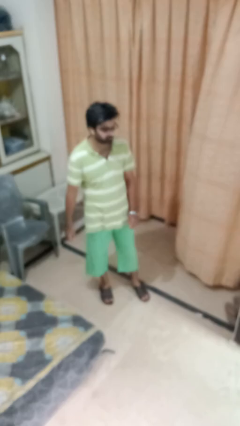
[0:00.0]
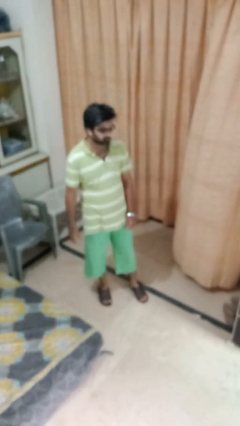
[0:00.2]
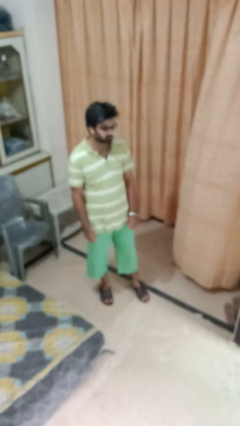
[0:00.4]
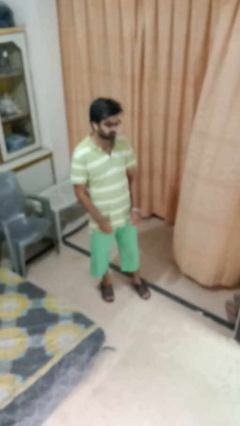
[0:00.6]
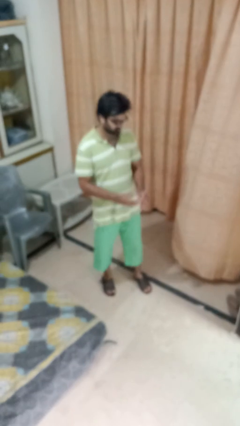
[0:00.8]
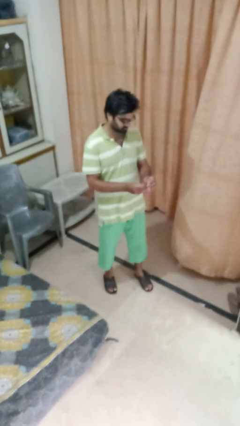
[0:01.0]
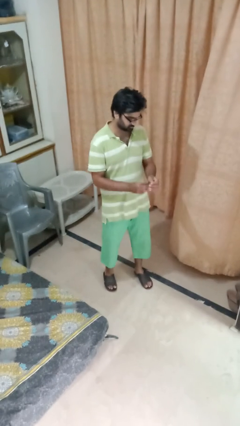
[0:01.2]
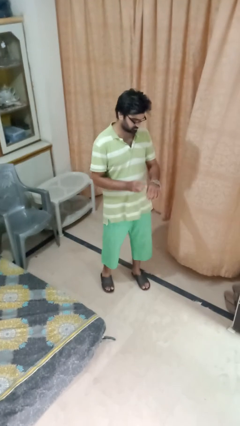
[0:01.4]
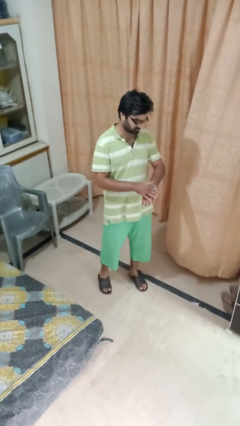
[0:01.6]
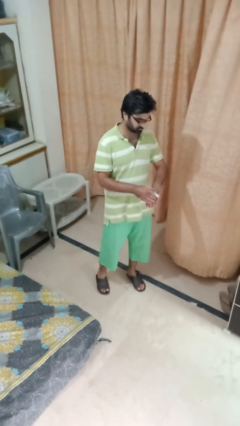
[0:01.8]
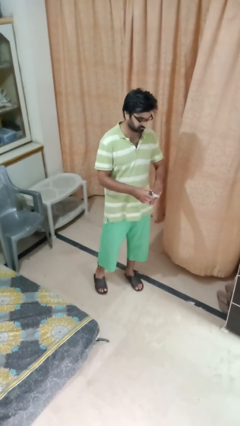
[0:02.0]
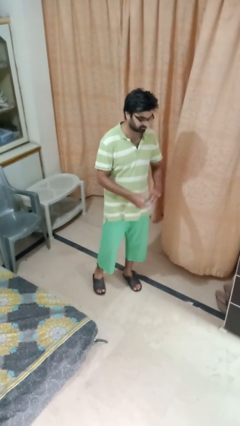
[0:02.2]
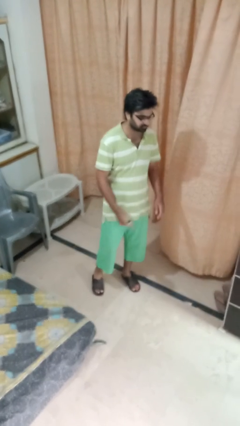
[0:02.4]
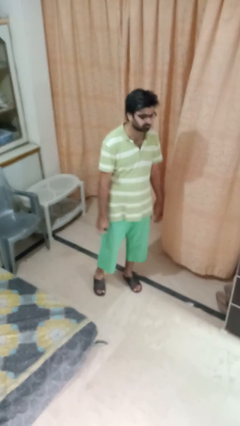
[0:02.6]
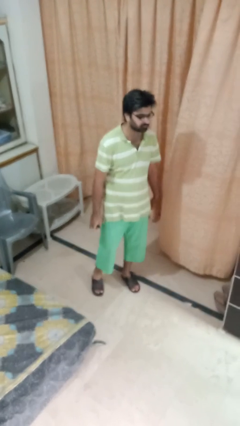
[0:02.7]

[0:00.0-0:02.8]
person takes off wristwatch

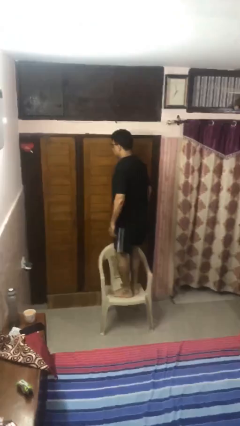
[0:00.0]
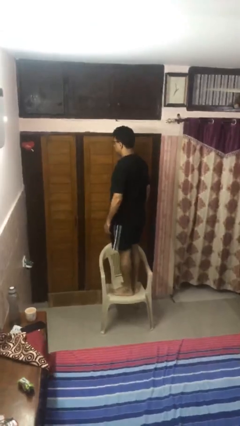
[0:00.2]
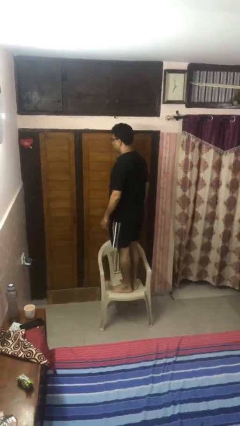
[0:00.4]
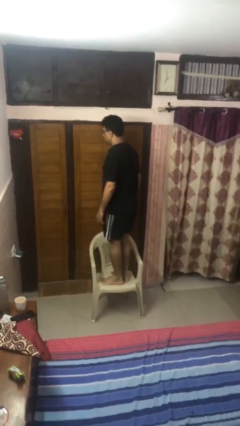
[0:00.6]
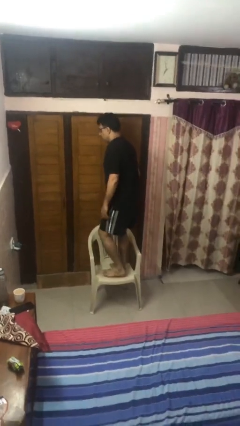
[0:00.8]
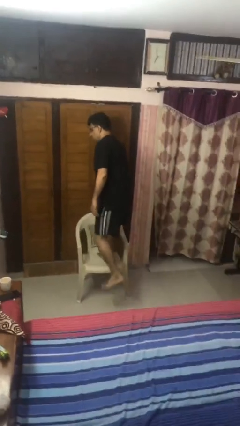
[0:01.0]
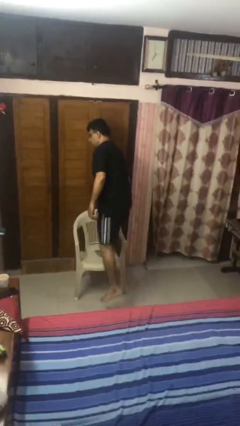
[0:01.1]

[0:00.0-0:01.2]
person climbs off chair

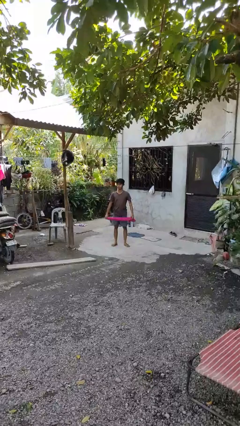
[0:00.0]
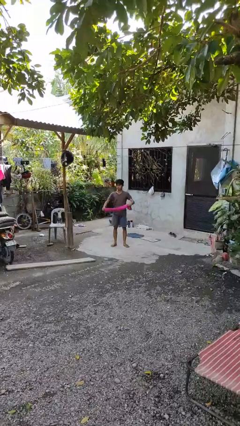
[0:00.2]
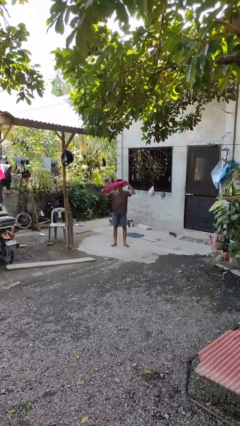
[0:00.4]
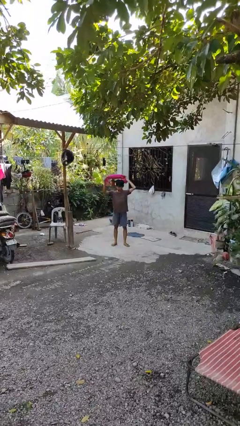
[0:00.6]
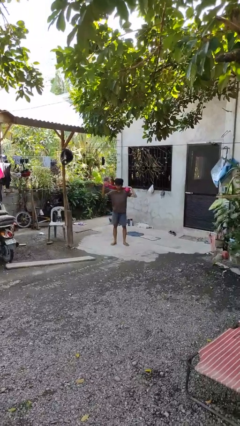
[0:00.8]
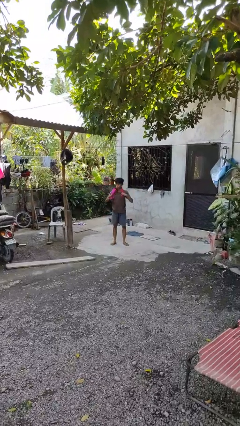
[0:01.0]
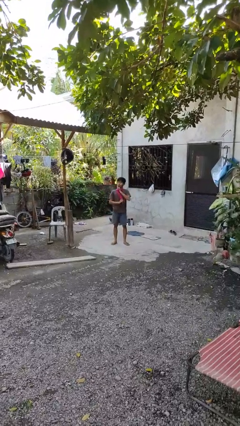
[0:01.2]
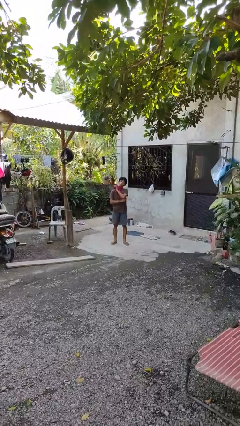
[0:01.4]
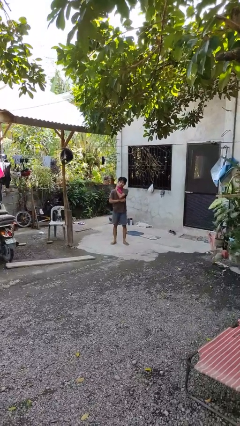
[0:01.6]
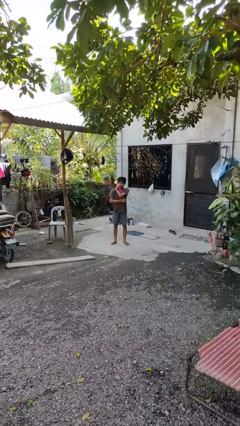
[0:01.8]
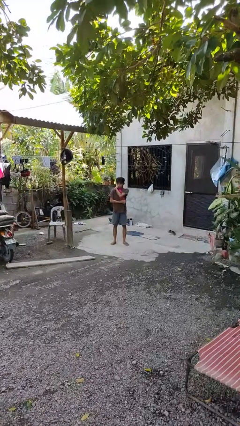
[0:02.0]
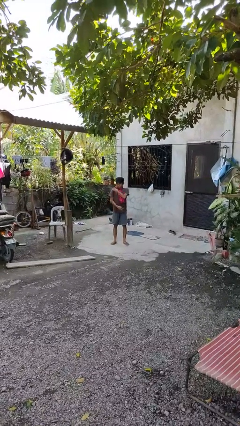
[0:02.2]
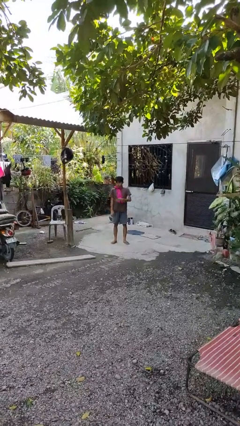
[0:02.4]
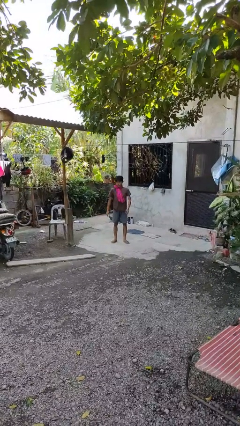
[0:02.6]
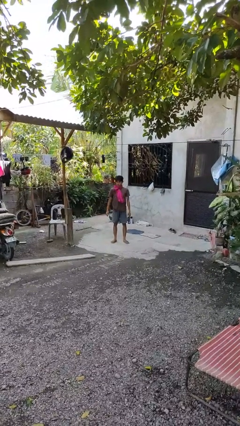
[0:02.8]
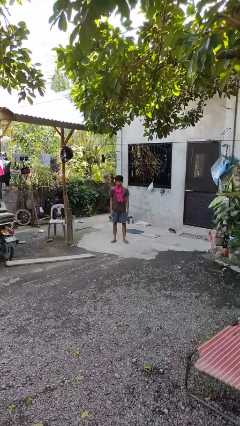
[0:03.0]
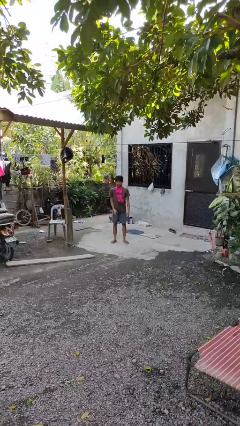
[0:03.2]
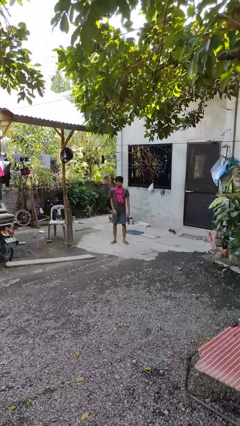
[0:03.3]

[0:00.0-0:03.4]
person puts on scarf

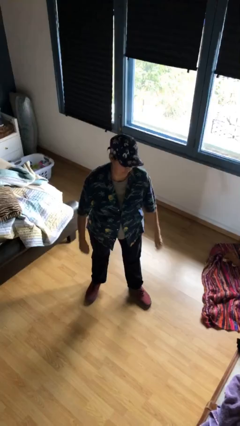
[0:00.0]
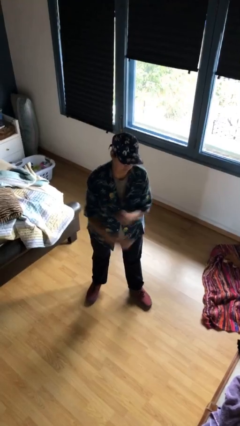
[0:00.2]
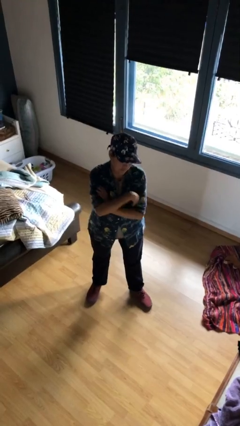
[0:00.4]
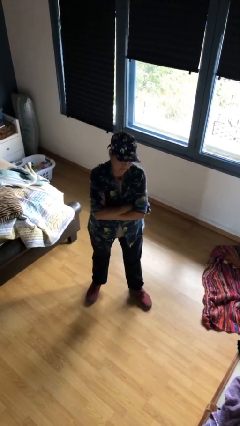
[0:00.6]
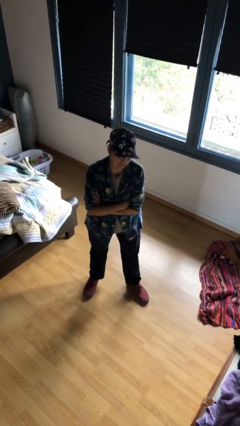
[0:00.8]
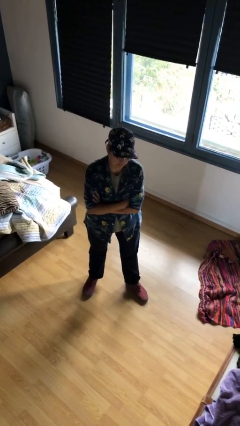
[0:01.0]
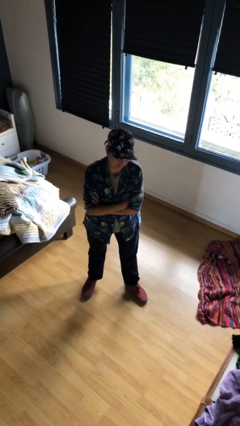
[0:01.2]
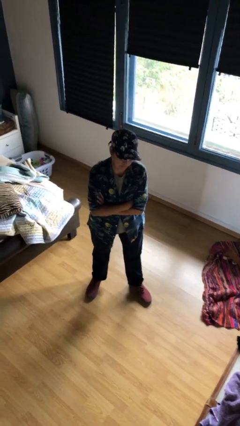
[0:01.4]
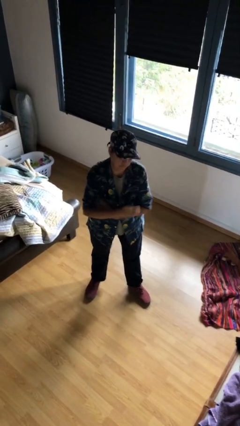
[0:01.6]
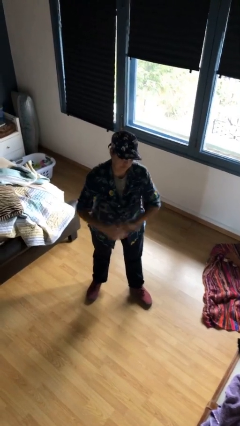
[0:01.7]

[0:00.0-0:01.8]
person crosses arms

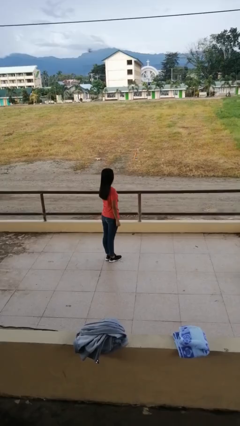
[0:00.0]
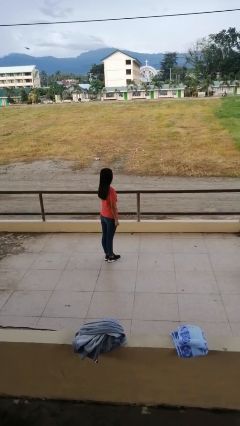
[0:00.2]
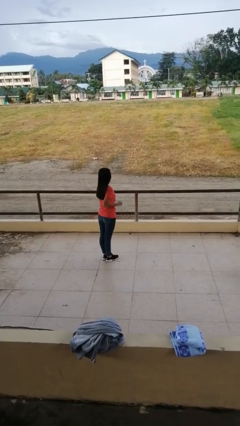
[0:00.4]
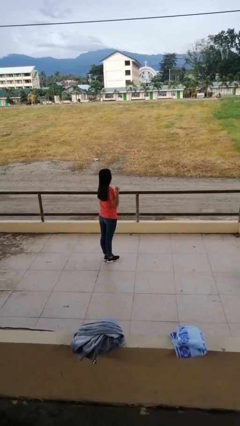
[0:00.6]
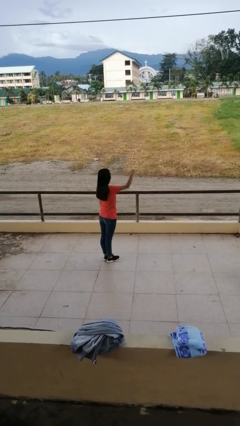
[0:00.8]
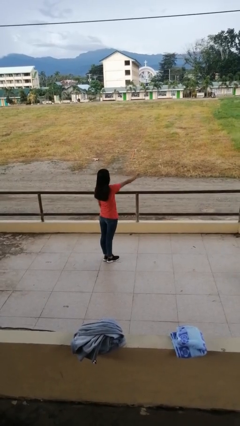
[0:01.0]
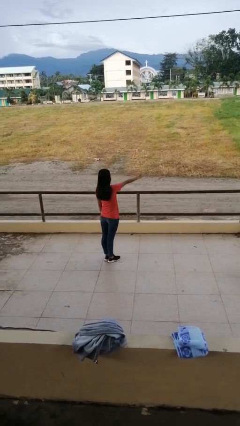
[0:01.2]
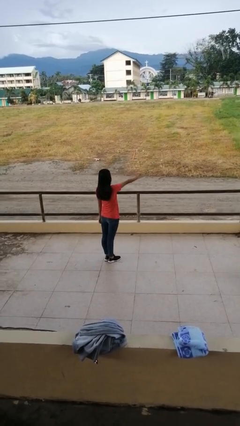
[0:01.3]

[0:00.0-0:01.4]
person punches

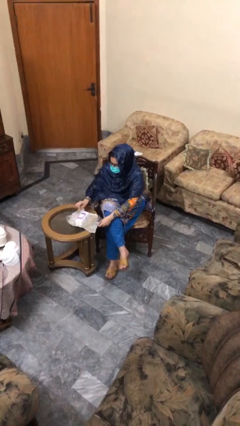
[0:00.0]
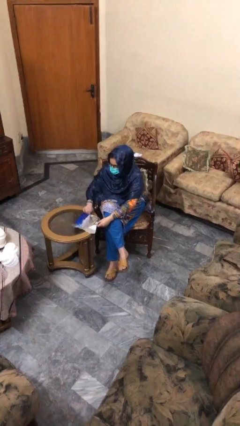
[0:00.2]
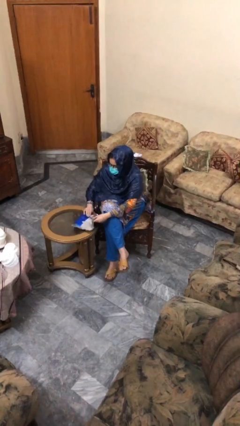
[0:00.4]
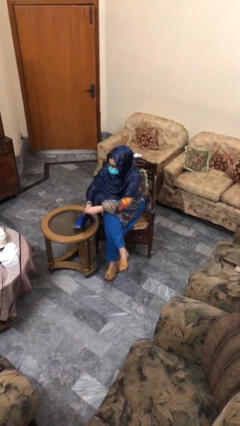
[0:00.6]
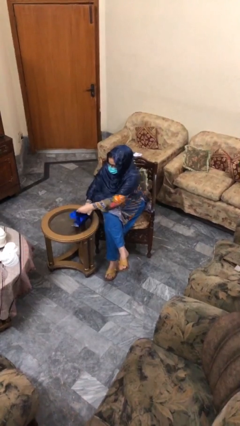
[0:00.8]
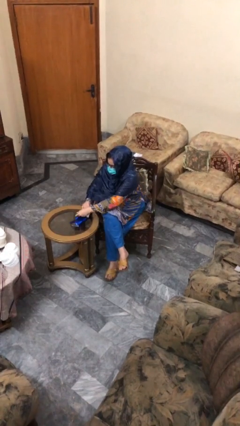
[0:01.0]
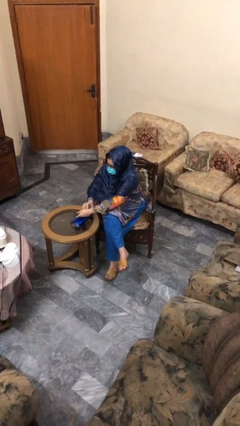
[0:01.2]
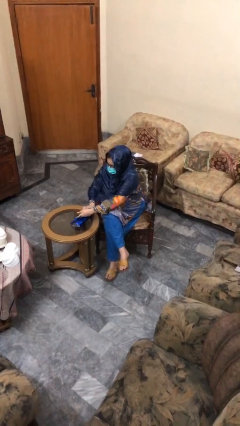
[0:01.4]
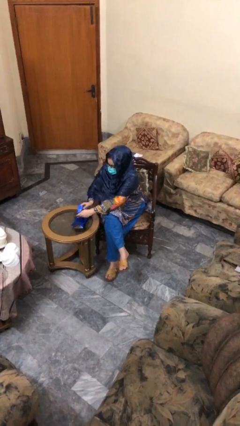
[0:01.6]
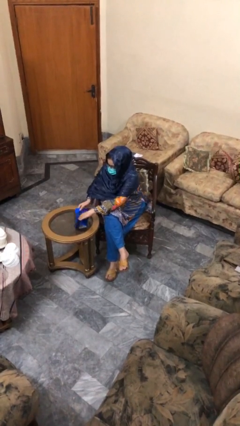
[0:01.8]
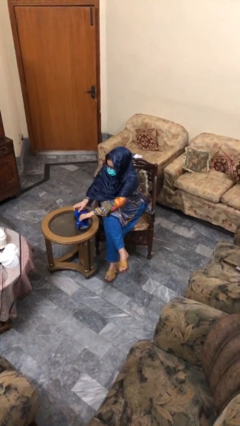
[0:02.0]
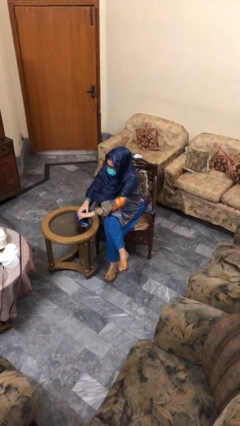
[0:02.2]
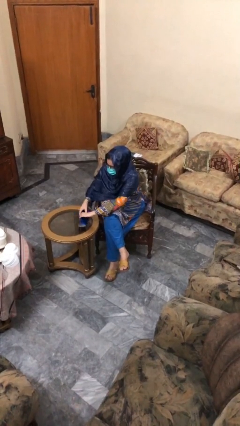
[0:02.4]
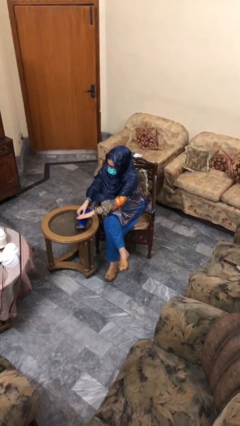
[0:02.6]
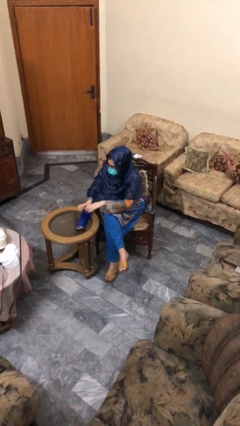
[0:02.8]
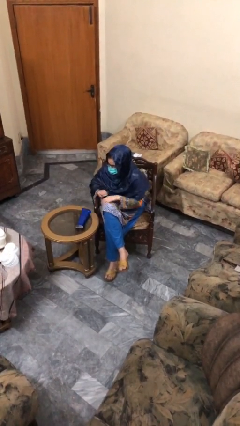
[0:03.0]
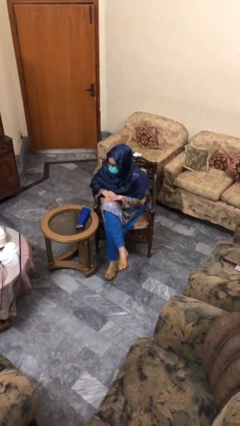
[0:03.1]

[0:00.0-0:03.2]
person wraps box

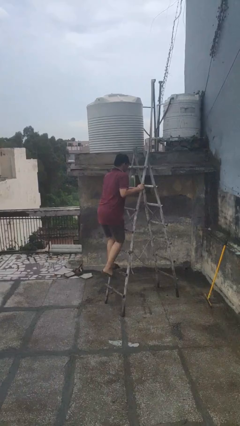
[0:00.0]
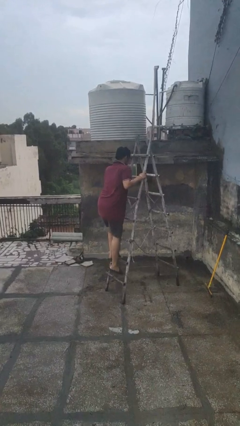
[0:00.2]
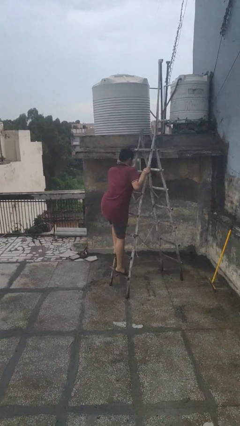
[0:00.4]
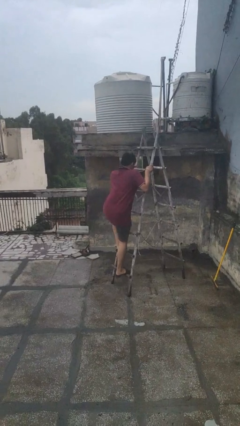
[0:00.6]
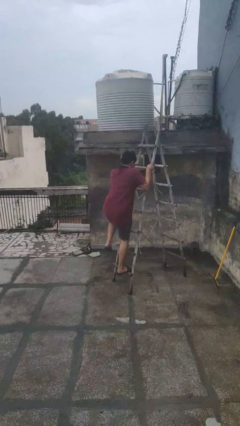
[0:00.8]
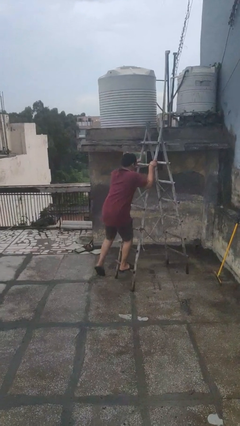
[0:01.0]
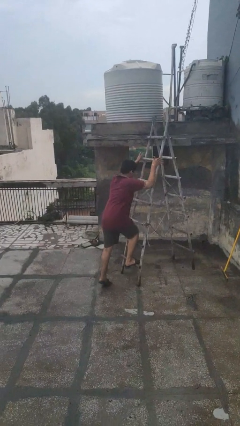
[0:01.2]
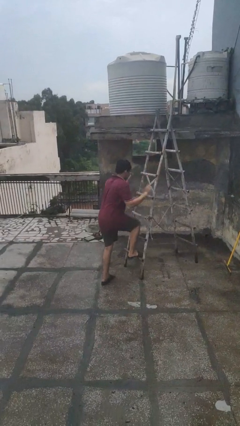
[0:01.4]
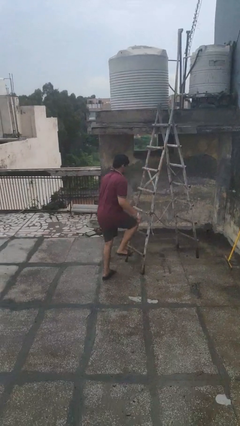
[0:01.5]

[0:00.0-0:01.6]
person climbs down ladder

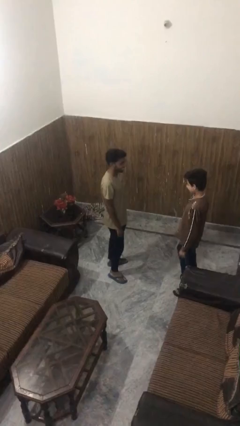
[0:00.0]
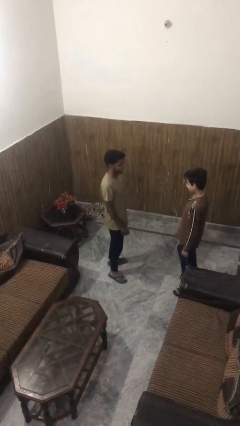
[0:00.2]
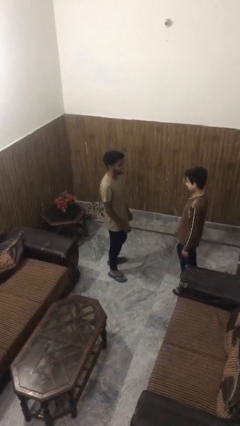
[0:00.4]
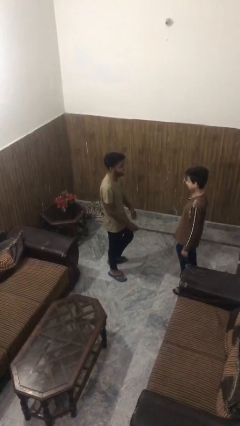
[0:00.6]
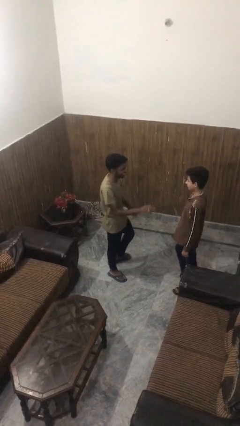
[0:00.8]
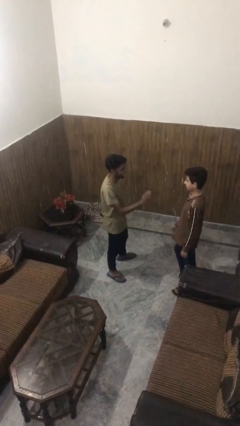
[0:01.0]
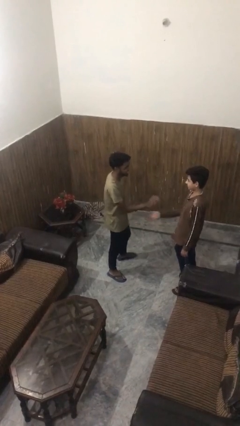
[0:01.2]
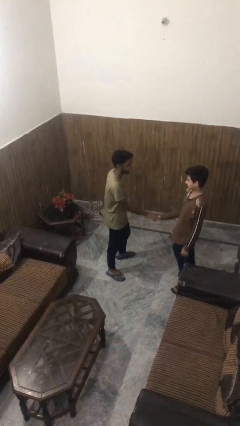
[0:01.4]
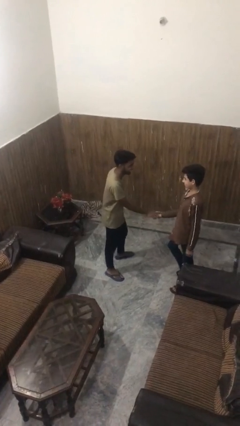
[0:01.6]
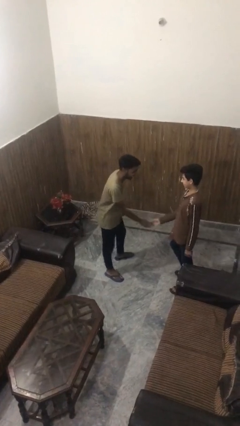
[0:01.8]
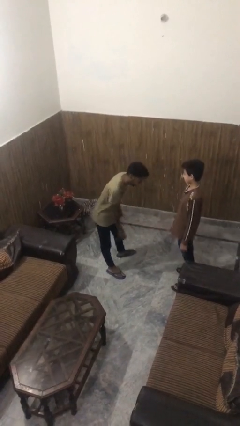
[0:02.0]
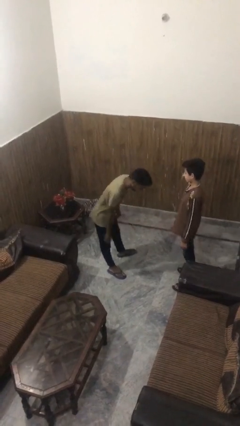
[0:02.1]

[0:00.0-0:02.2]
person laughs with person
